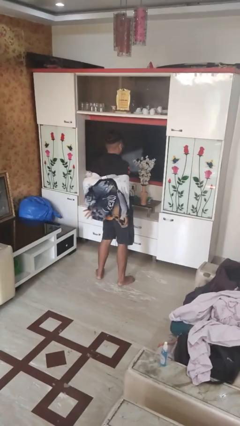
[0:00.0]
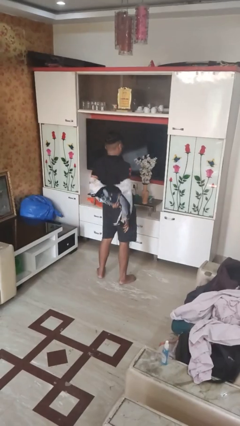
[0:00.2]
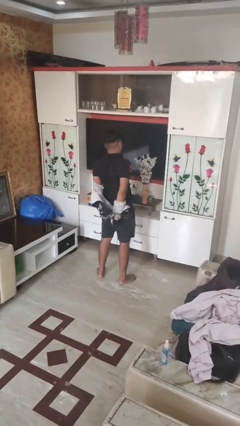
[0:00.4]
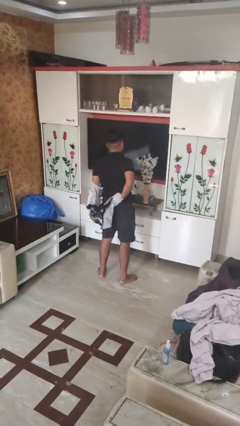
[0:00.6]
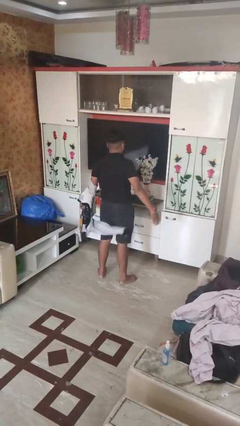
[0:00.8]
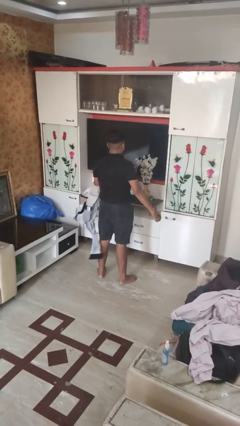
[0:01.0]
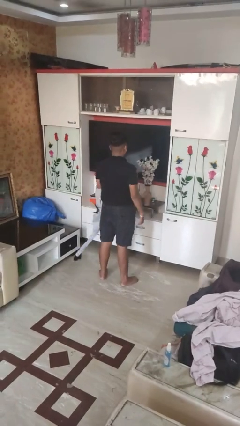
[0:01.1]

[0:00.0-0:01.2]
person takes off shirt

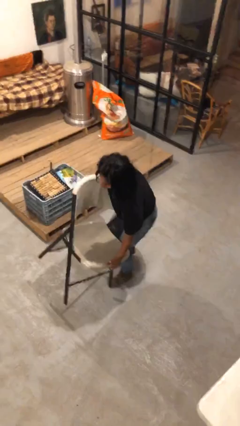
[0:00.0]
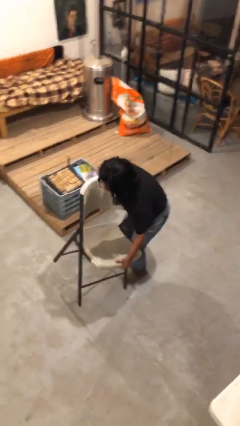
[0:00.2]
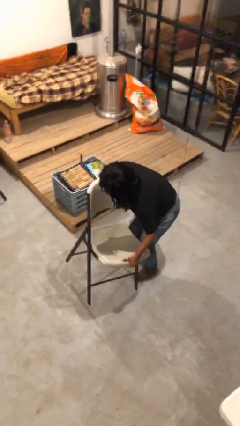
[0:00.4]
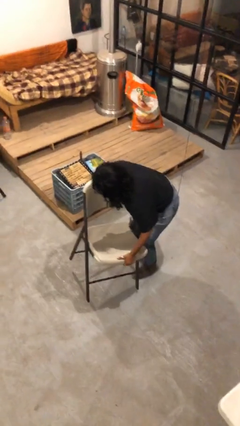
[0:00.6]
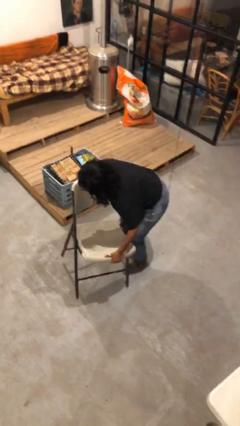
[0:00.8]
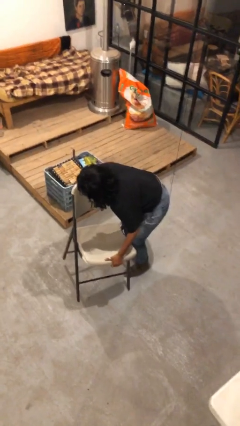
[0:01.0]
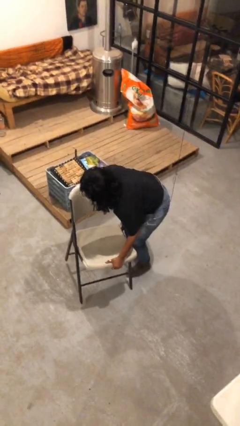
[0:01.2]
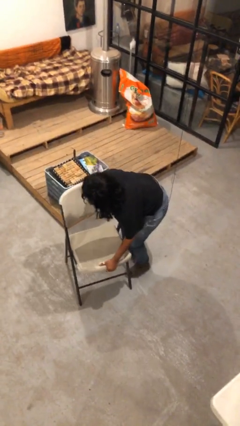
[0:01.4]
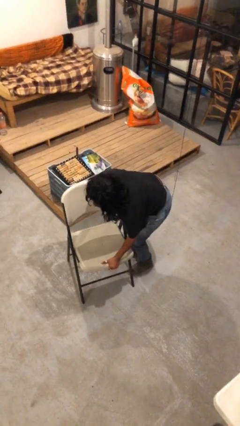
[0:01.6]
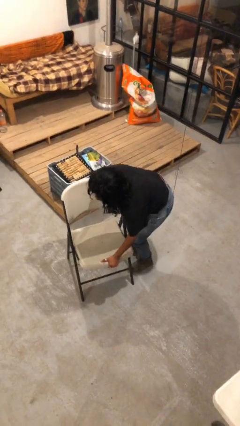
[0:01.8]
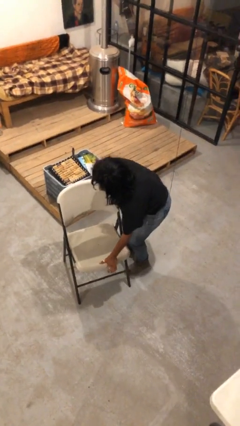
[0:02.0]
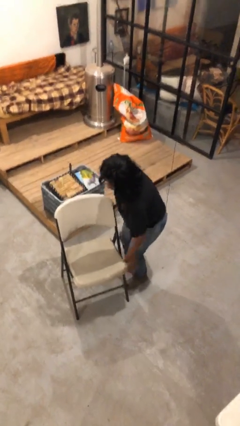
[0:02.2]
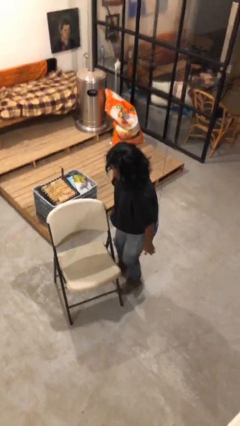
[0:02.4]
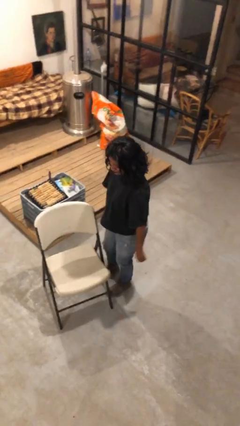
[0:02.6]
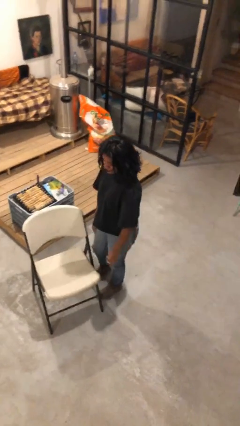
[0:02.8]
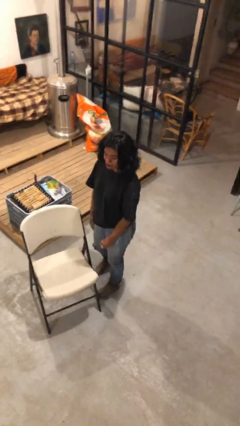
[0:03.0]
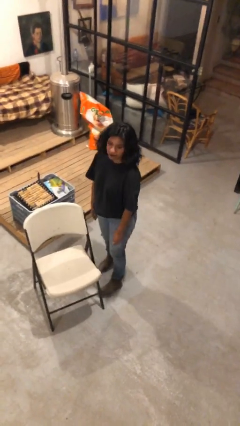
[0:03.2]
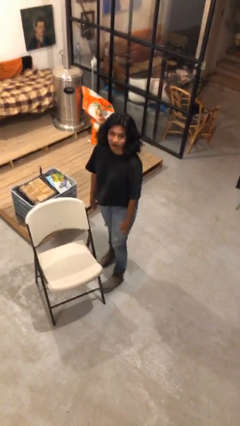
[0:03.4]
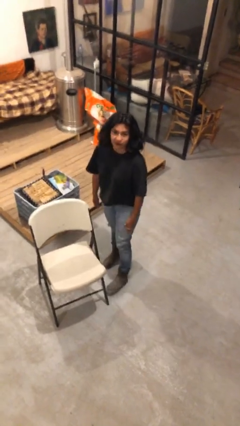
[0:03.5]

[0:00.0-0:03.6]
person puts down object on floor

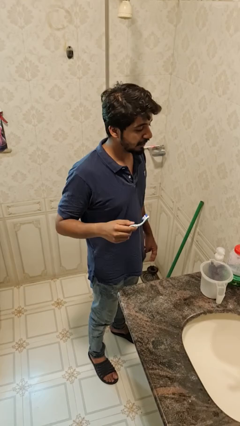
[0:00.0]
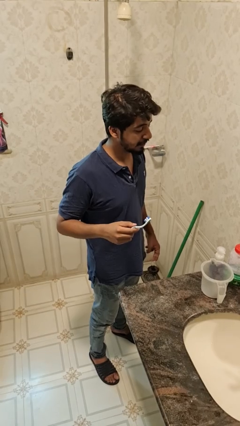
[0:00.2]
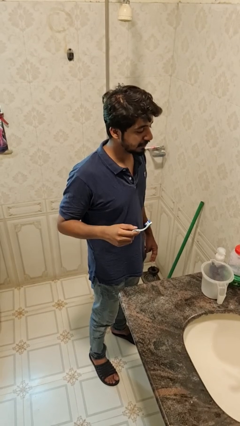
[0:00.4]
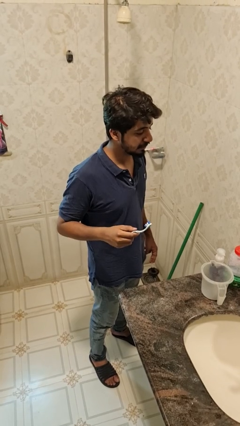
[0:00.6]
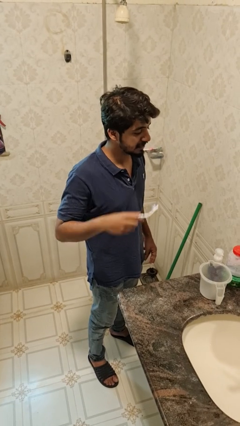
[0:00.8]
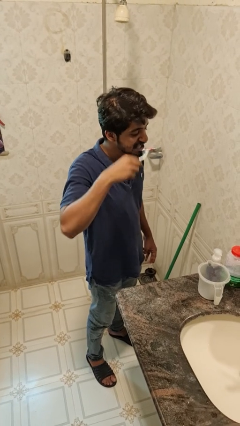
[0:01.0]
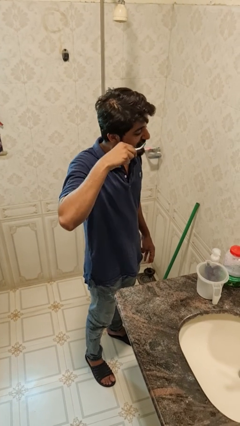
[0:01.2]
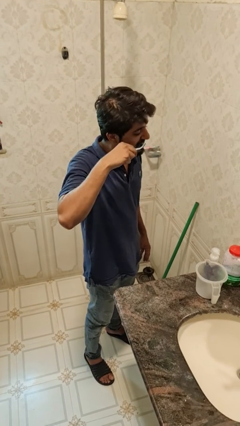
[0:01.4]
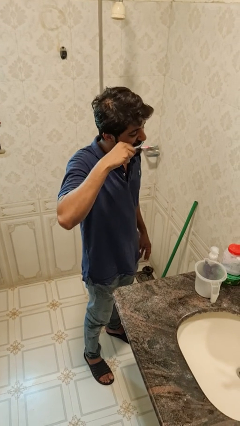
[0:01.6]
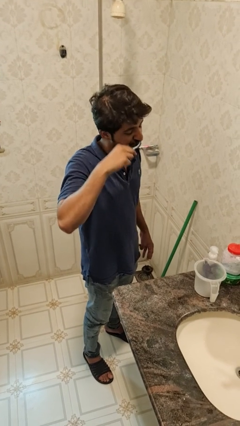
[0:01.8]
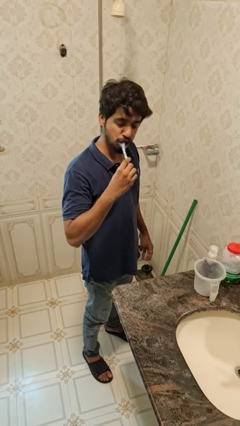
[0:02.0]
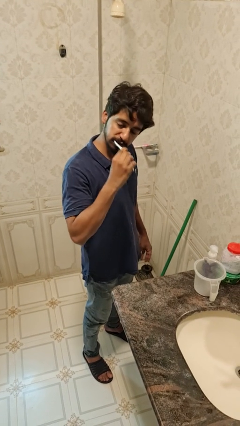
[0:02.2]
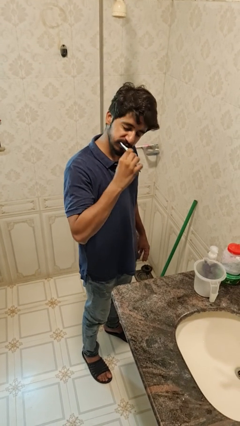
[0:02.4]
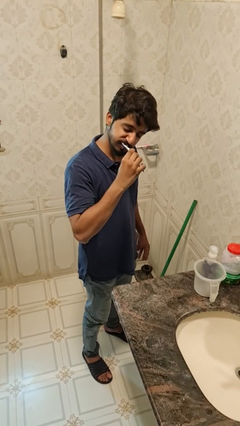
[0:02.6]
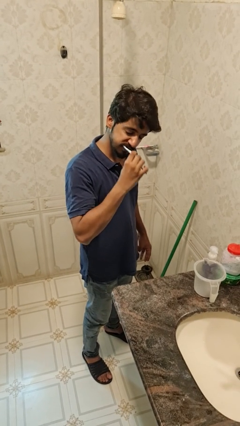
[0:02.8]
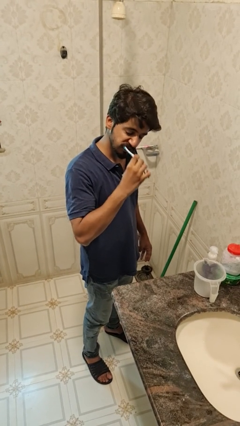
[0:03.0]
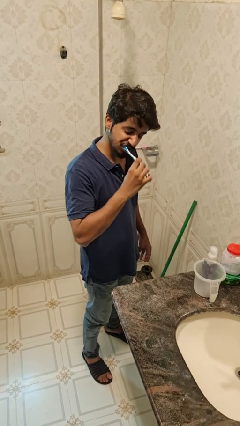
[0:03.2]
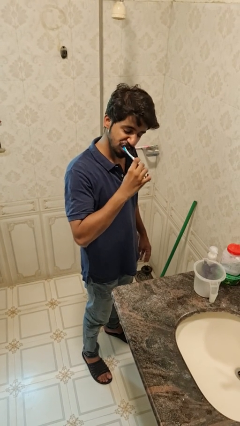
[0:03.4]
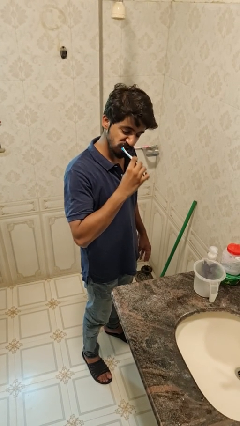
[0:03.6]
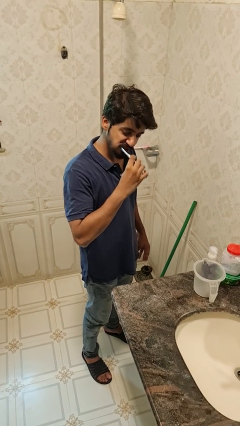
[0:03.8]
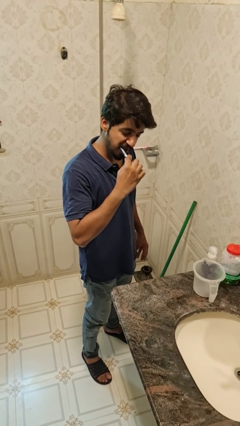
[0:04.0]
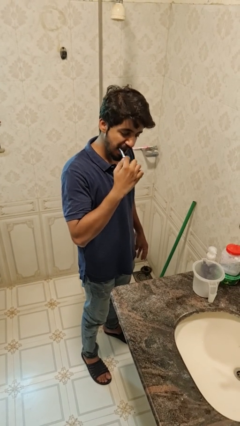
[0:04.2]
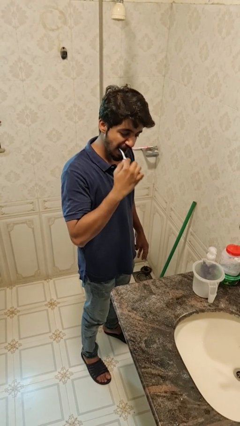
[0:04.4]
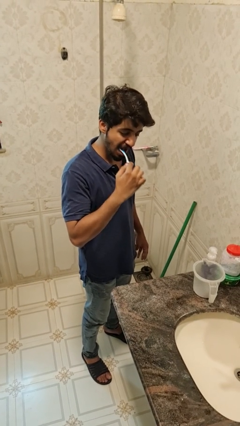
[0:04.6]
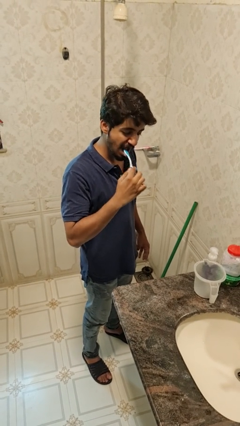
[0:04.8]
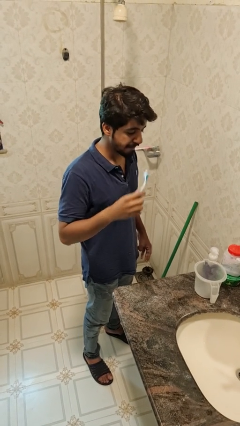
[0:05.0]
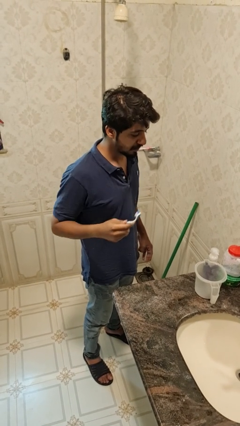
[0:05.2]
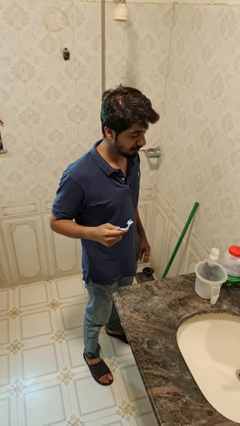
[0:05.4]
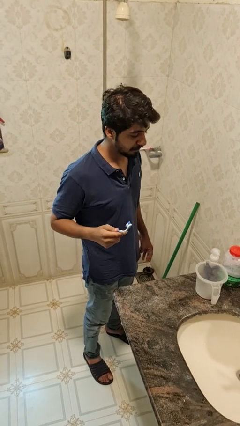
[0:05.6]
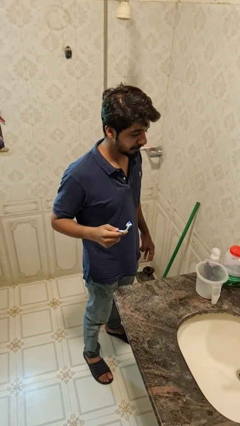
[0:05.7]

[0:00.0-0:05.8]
person brushes teeth

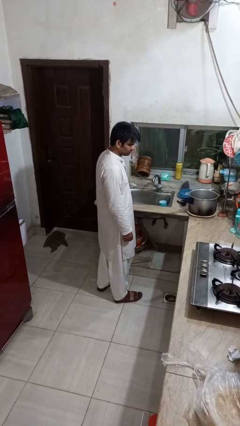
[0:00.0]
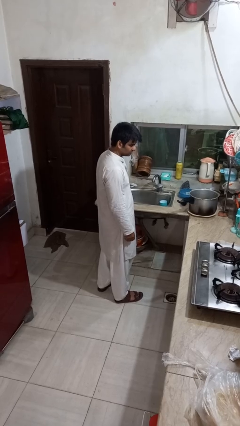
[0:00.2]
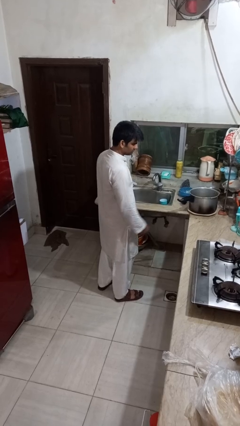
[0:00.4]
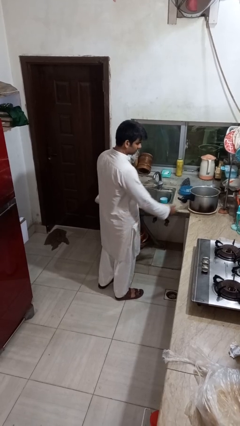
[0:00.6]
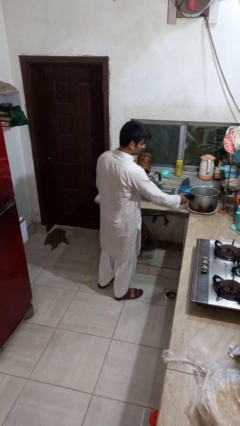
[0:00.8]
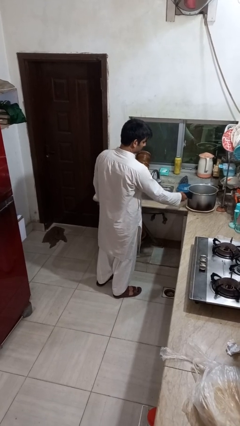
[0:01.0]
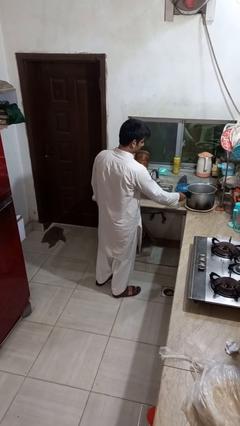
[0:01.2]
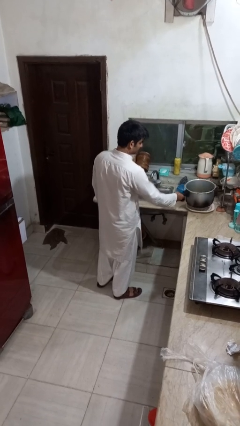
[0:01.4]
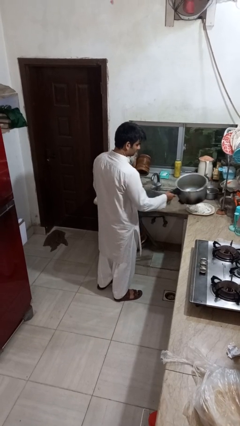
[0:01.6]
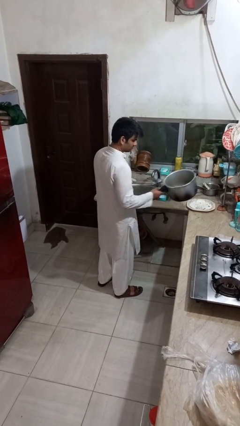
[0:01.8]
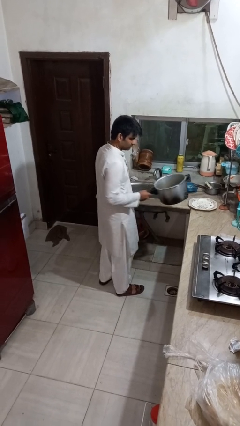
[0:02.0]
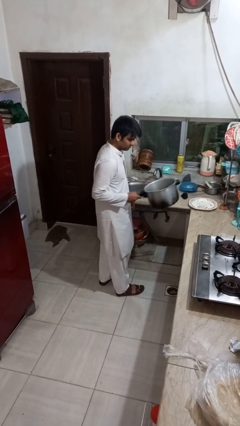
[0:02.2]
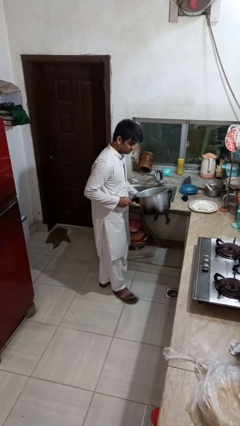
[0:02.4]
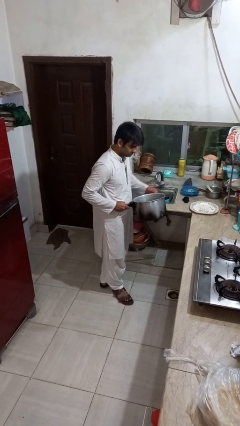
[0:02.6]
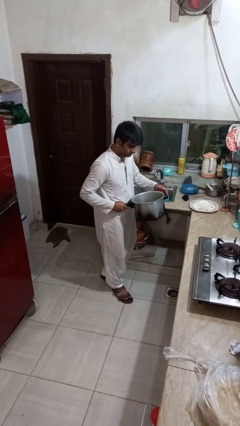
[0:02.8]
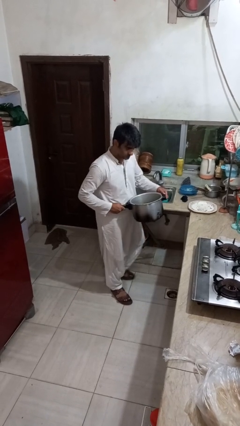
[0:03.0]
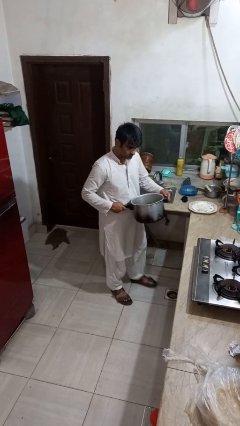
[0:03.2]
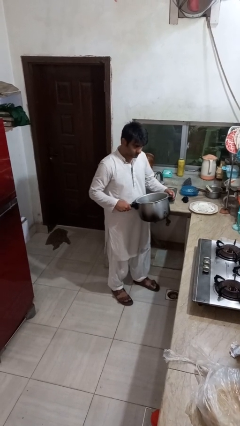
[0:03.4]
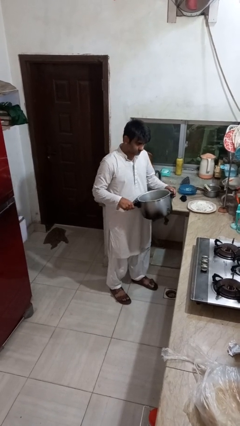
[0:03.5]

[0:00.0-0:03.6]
person picks up object from countertop

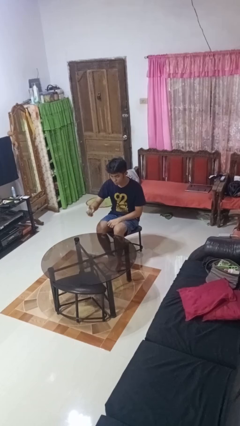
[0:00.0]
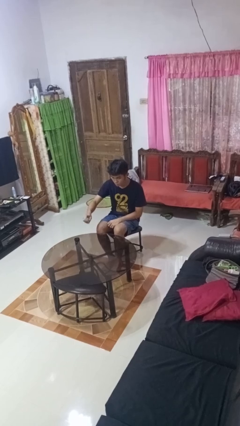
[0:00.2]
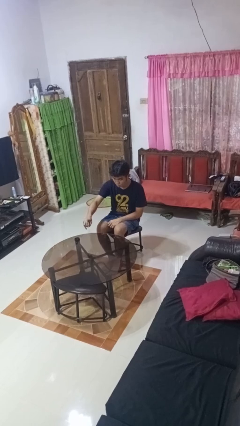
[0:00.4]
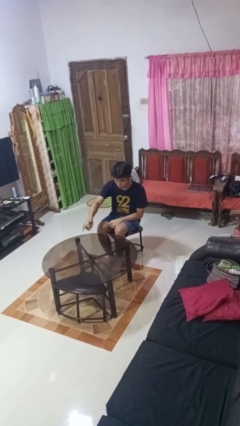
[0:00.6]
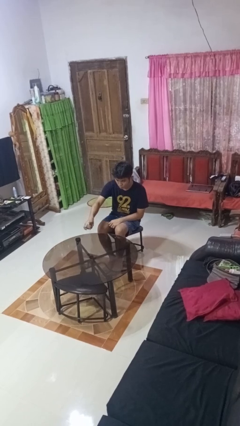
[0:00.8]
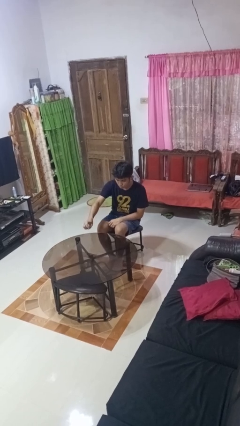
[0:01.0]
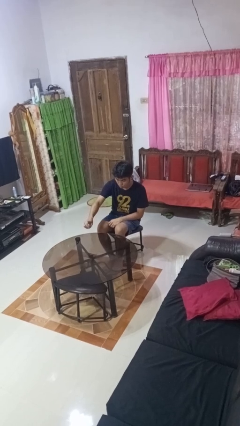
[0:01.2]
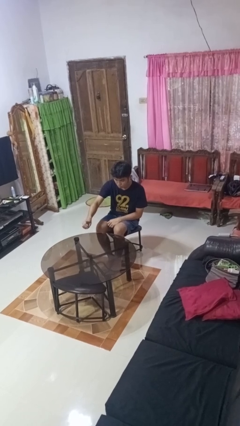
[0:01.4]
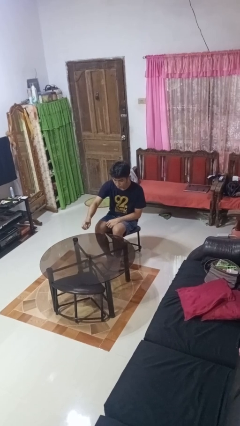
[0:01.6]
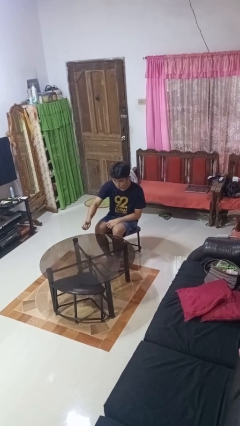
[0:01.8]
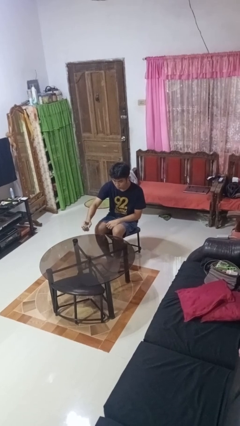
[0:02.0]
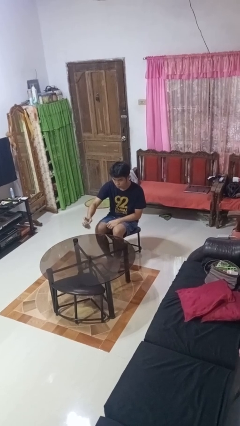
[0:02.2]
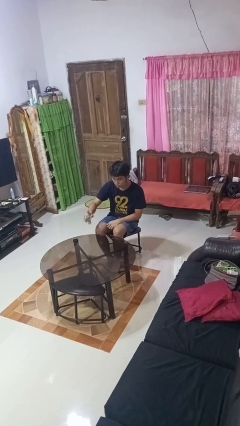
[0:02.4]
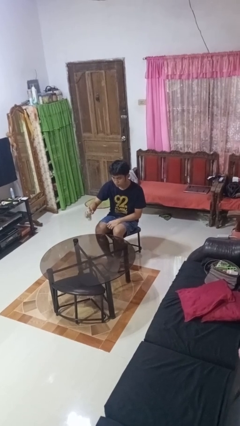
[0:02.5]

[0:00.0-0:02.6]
person sprays from bottle

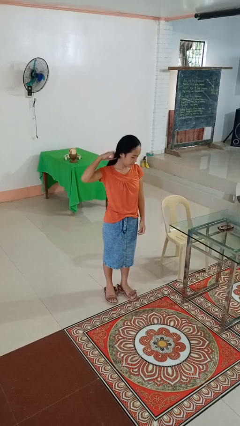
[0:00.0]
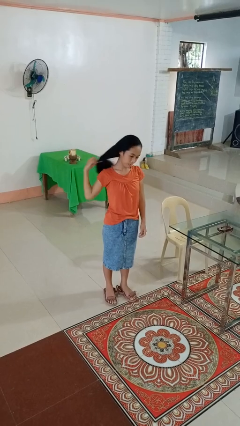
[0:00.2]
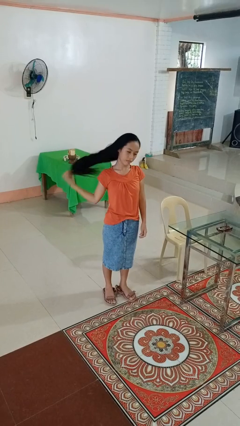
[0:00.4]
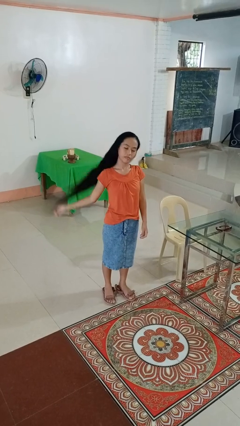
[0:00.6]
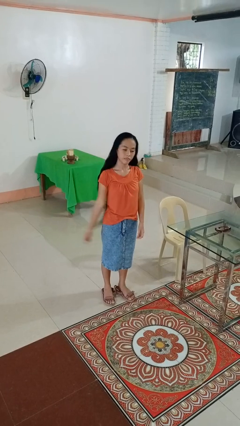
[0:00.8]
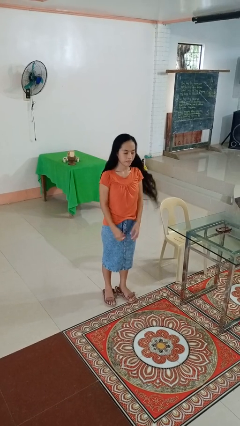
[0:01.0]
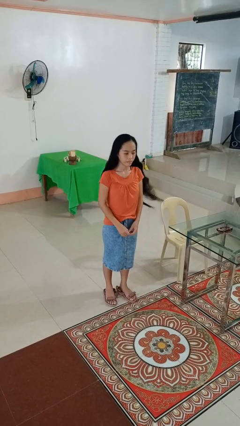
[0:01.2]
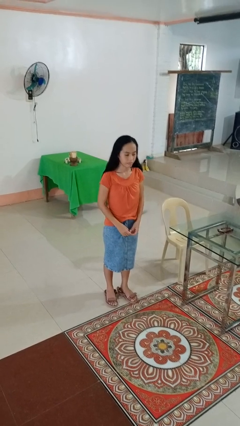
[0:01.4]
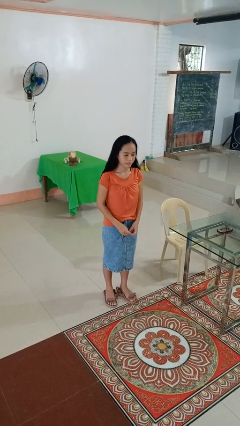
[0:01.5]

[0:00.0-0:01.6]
person takes off hairtie
